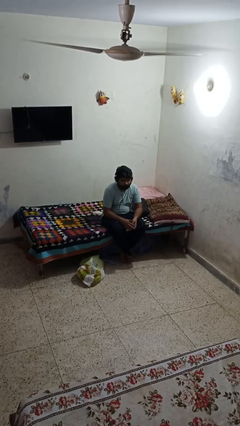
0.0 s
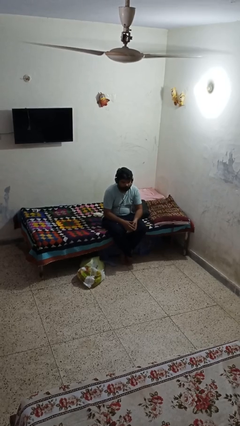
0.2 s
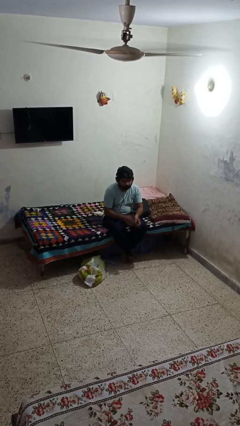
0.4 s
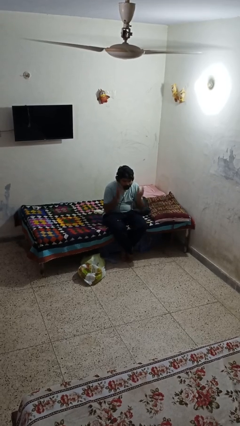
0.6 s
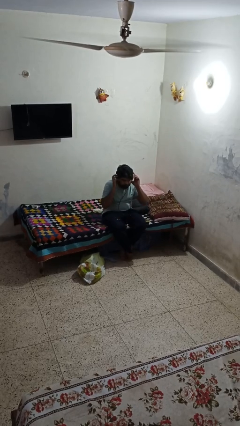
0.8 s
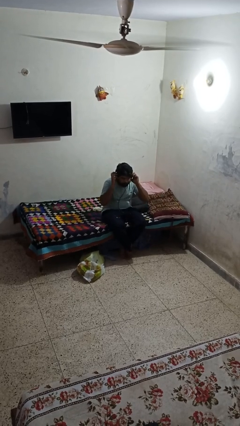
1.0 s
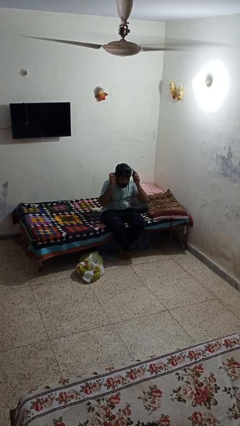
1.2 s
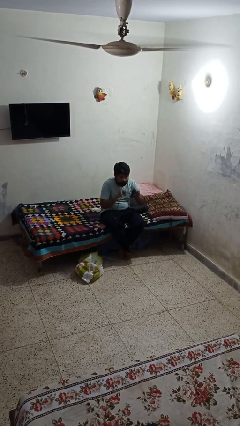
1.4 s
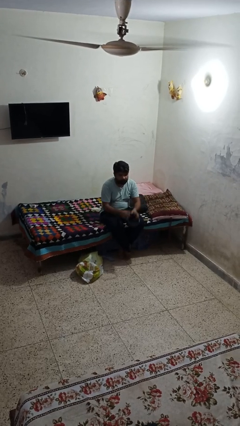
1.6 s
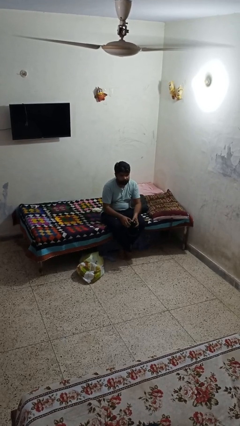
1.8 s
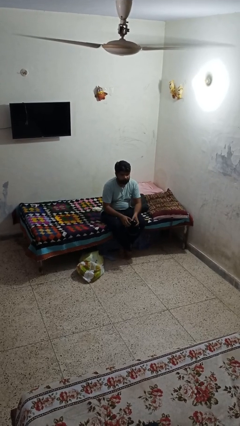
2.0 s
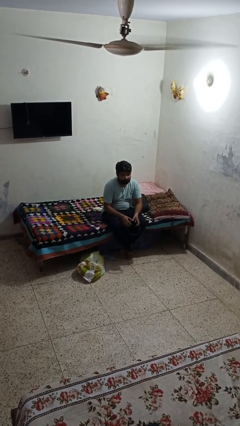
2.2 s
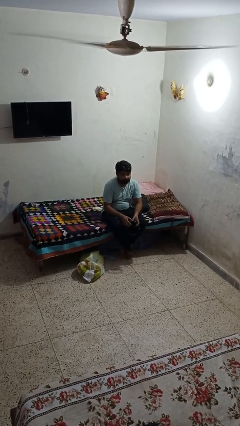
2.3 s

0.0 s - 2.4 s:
person takes off headphones

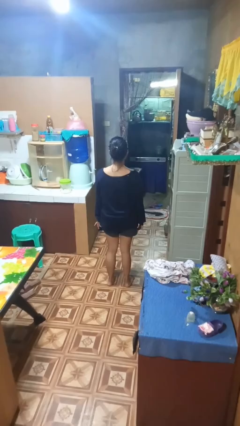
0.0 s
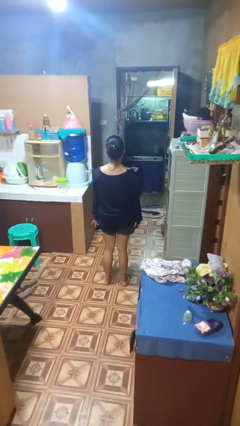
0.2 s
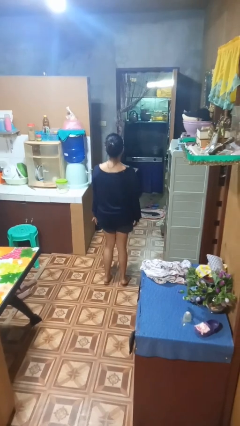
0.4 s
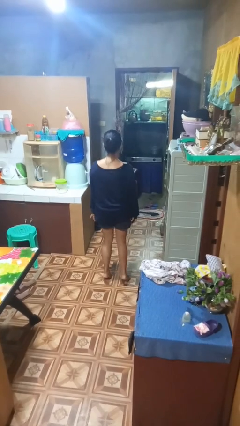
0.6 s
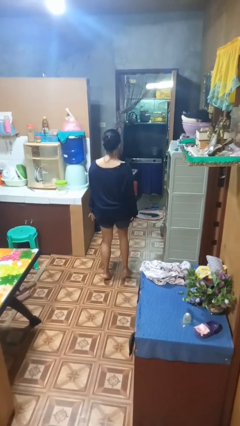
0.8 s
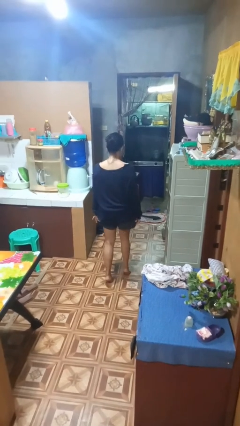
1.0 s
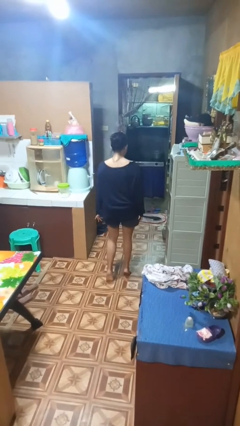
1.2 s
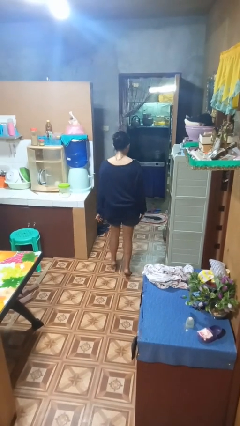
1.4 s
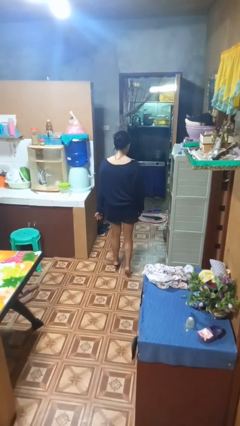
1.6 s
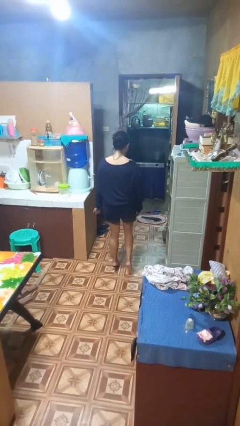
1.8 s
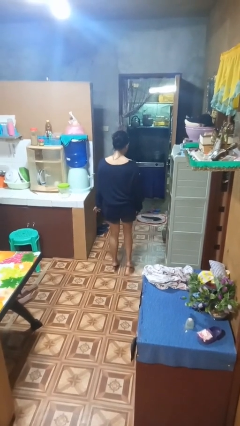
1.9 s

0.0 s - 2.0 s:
person walks tiptoe

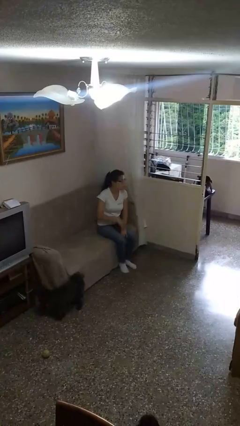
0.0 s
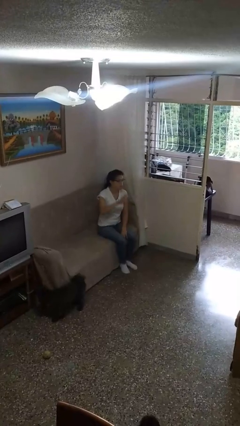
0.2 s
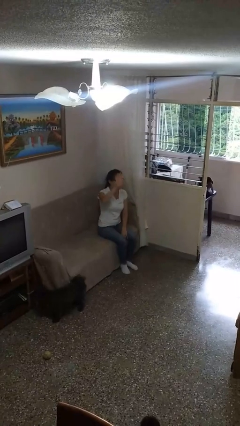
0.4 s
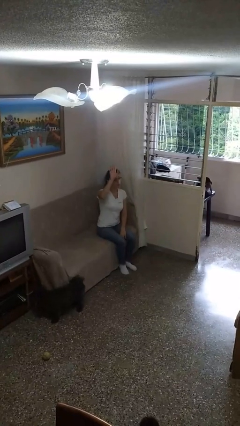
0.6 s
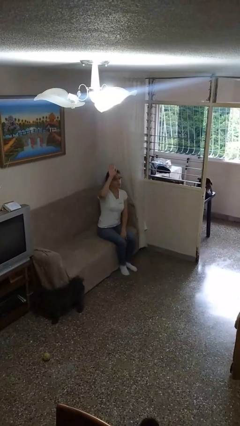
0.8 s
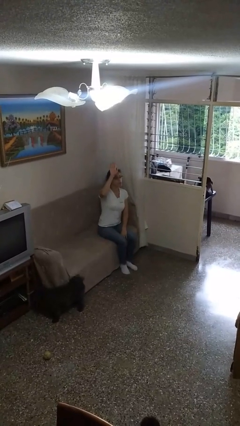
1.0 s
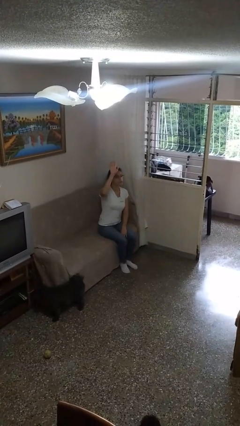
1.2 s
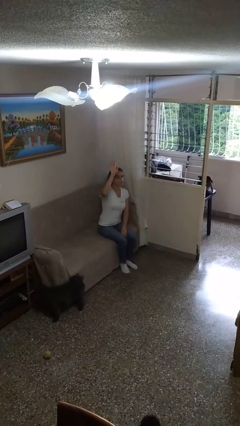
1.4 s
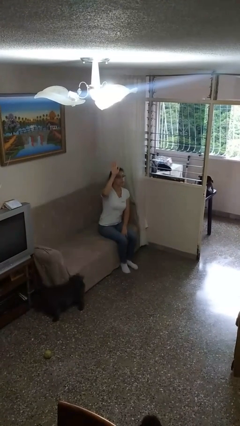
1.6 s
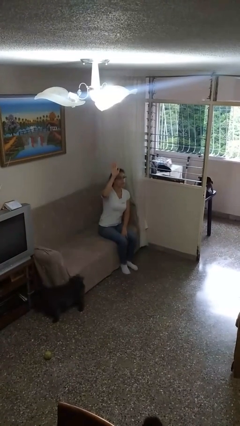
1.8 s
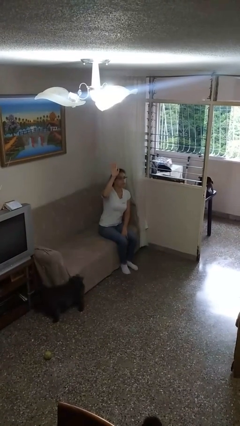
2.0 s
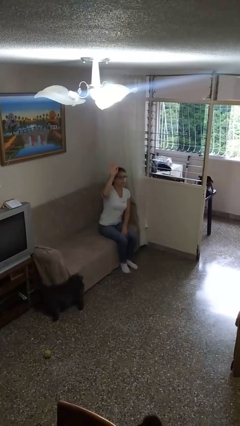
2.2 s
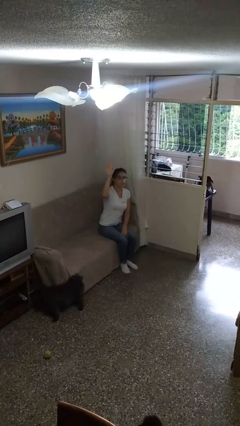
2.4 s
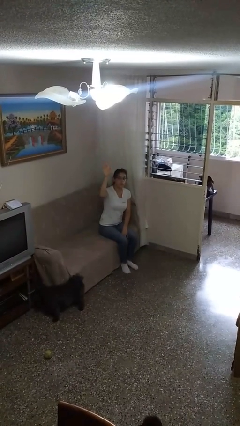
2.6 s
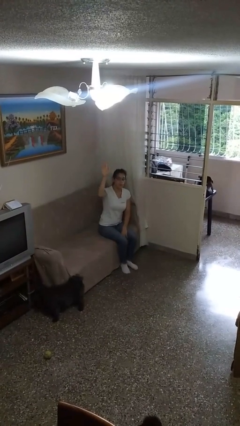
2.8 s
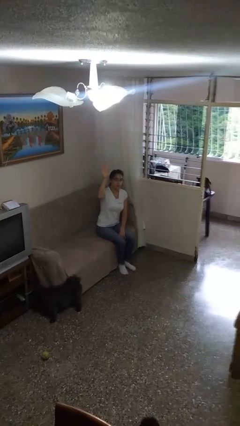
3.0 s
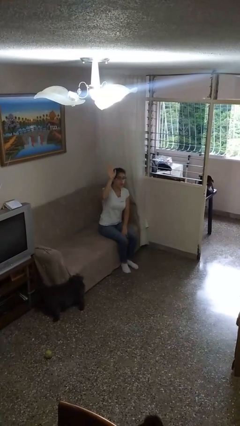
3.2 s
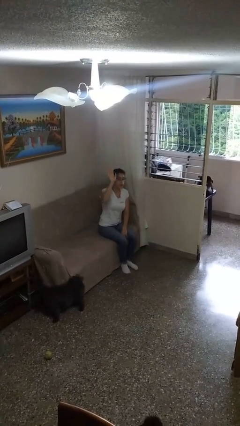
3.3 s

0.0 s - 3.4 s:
person gestures raise hand

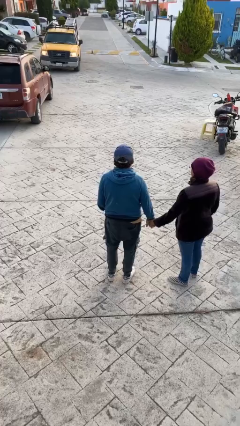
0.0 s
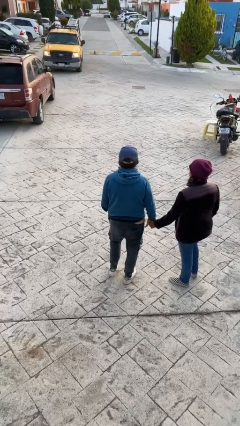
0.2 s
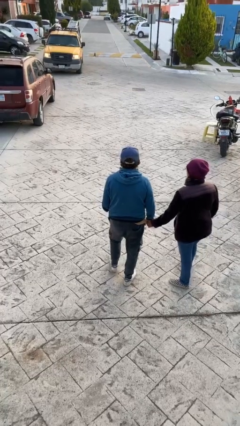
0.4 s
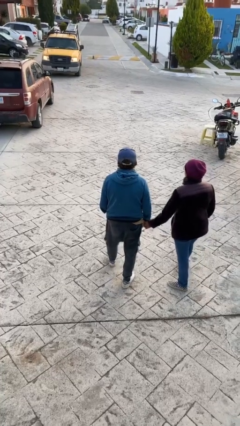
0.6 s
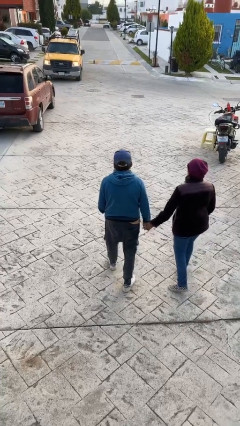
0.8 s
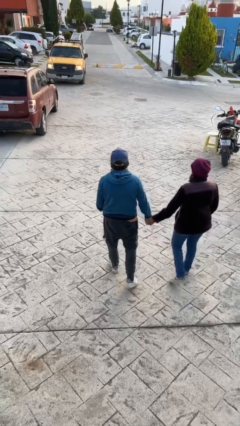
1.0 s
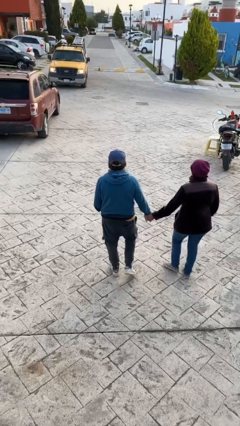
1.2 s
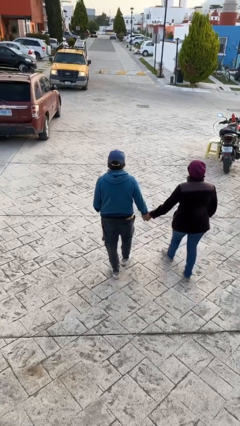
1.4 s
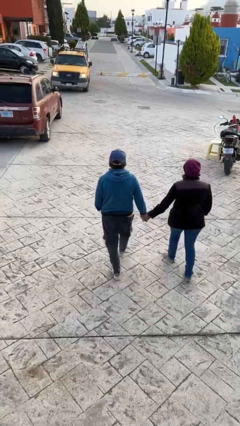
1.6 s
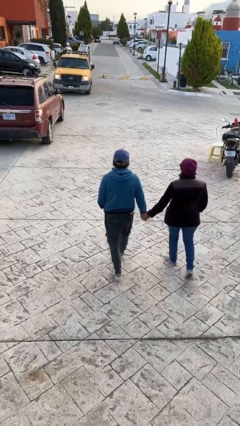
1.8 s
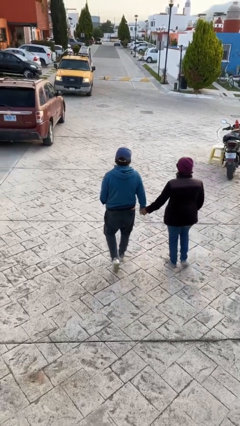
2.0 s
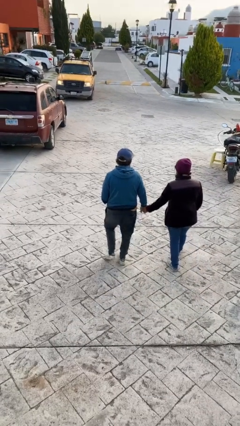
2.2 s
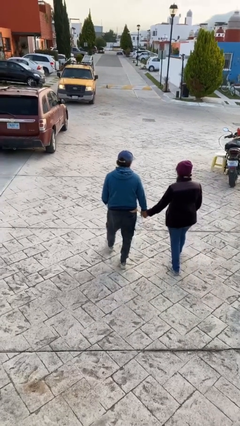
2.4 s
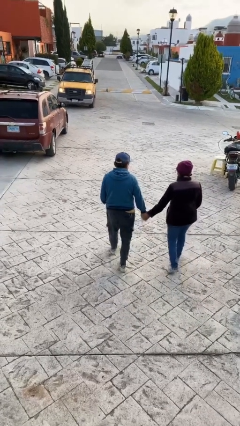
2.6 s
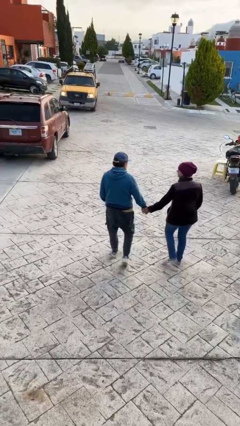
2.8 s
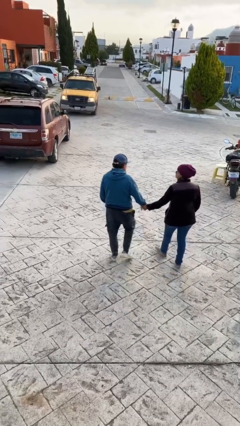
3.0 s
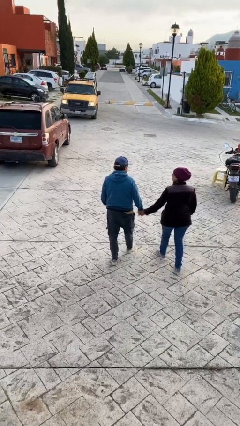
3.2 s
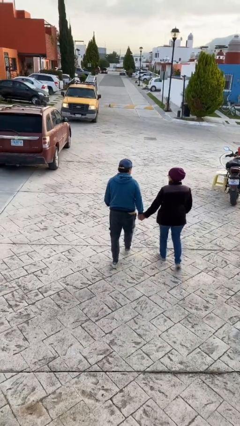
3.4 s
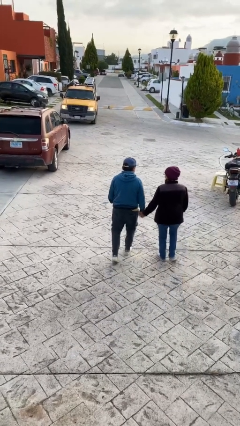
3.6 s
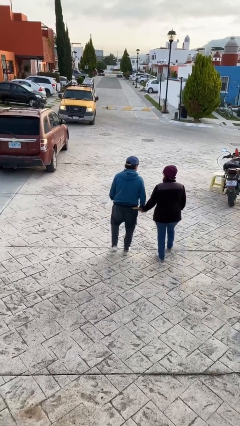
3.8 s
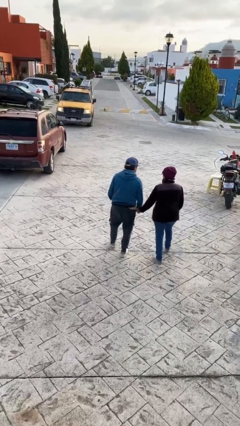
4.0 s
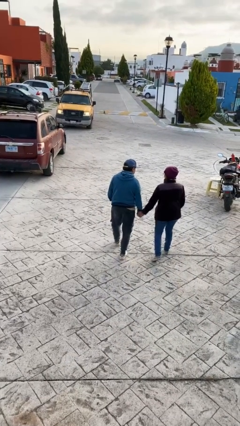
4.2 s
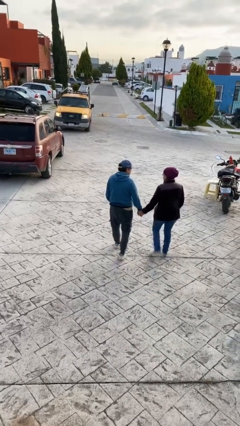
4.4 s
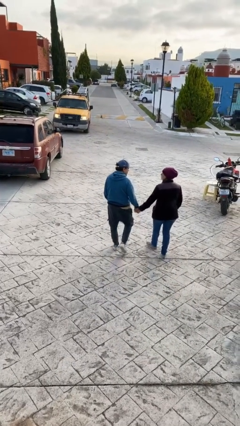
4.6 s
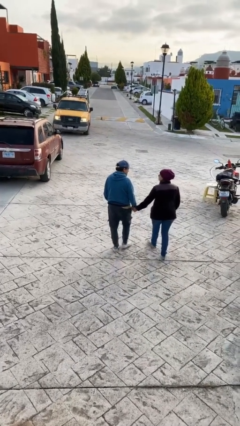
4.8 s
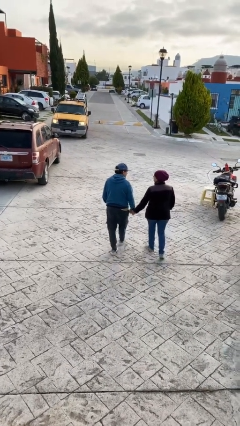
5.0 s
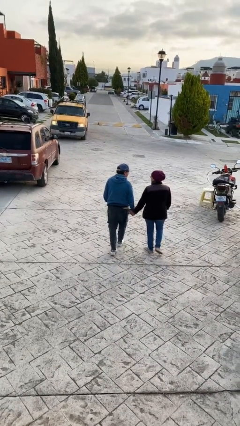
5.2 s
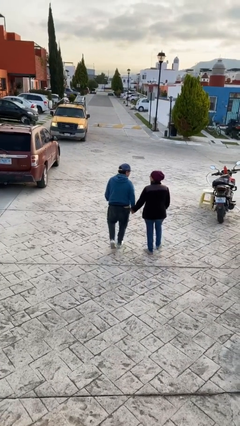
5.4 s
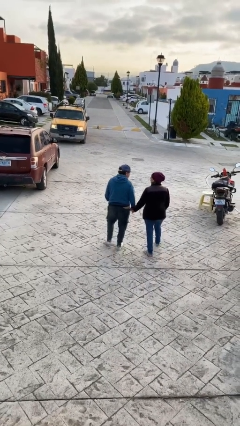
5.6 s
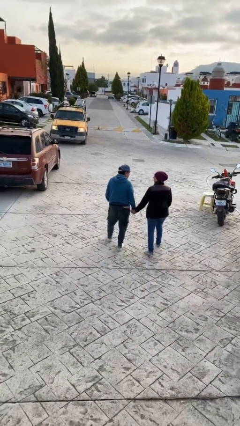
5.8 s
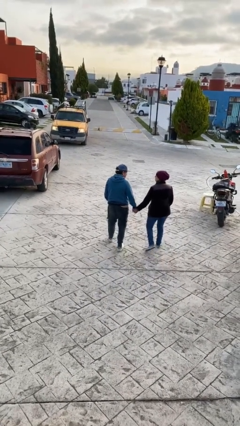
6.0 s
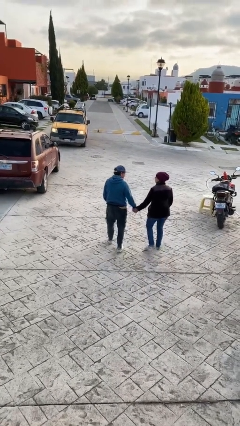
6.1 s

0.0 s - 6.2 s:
person holds hand

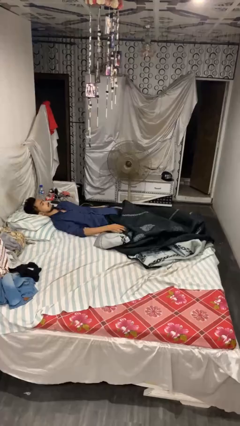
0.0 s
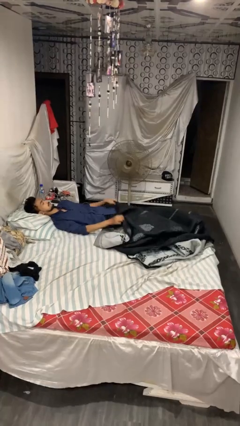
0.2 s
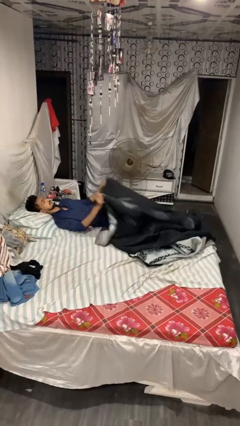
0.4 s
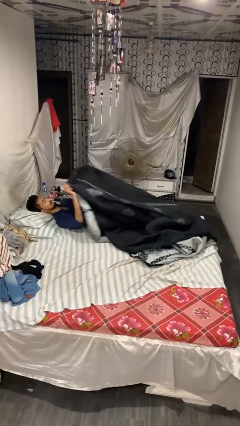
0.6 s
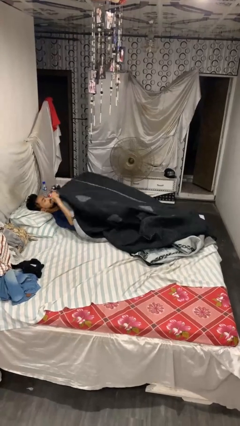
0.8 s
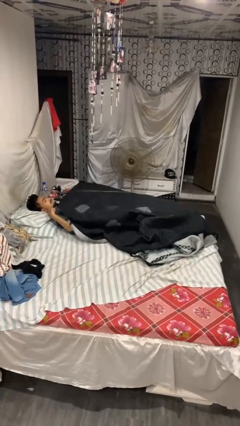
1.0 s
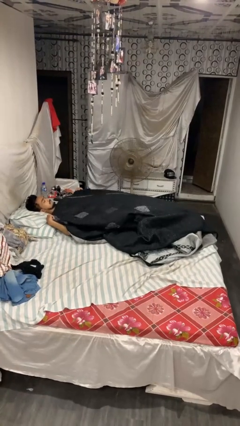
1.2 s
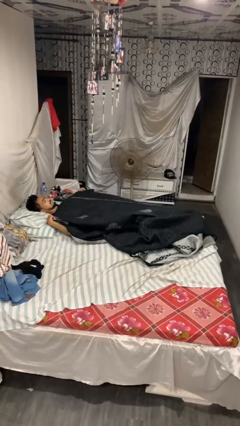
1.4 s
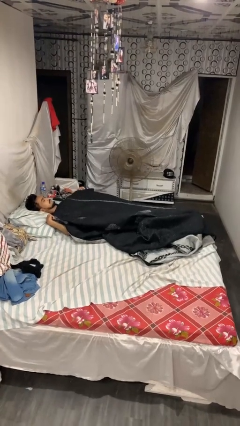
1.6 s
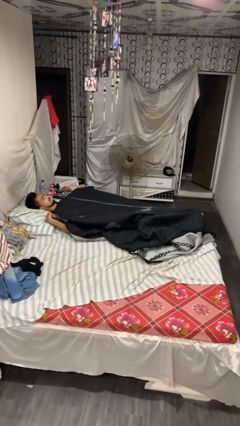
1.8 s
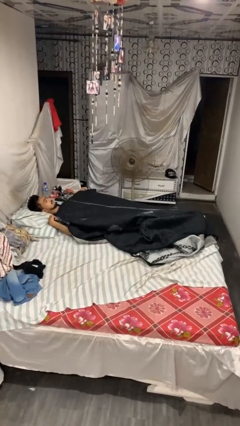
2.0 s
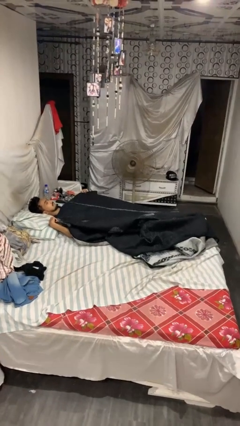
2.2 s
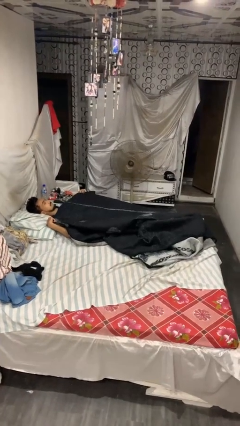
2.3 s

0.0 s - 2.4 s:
person covers with blanket

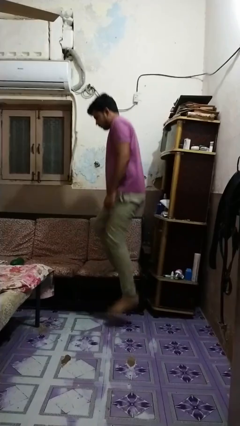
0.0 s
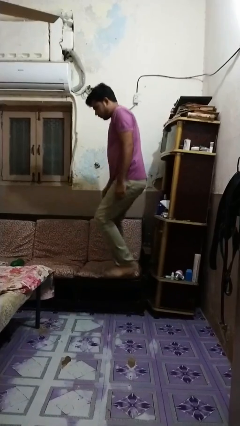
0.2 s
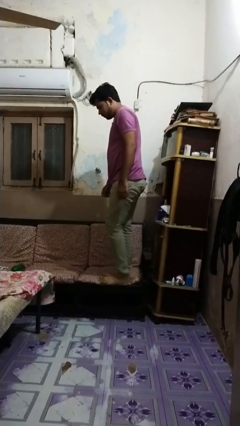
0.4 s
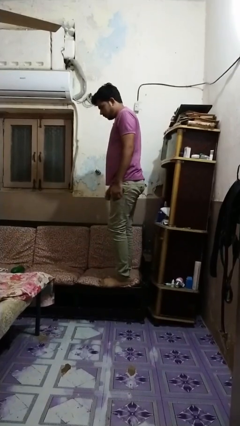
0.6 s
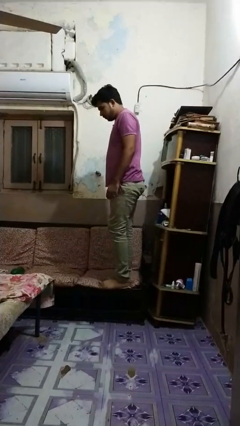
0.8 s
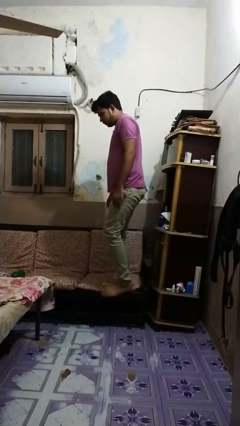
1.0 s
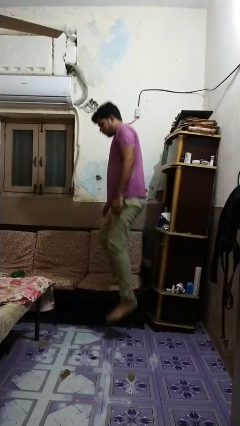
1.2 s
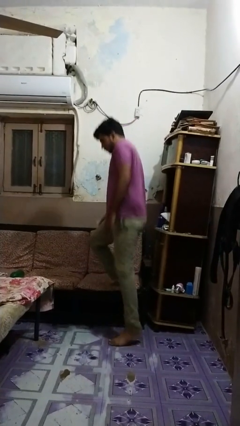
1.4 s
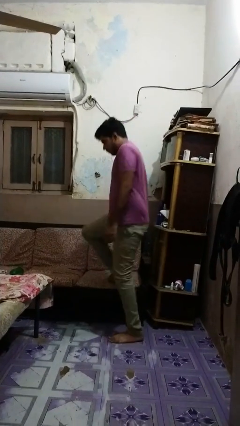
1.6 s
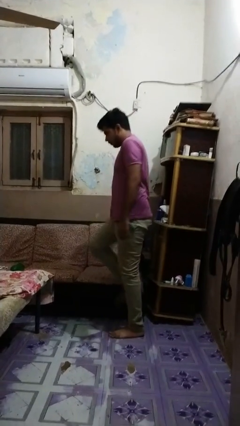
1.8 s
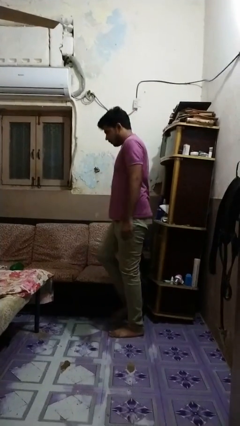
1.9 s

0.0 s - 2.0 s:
person climbs on couch
